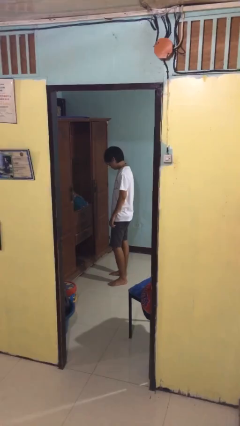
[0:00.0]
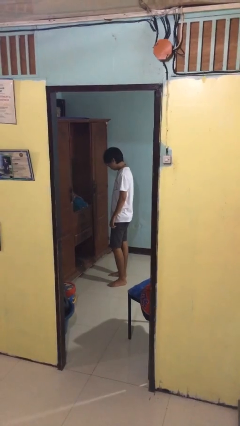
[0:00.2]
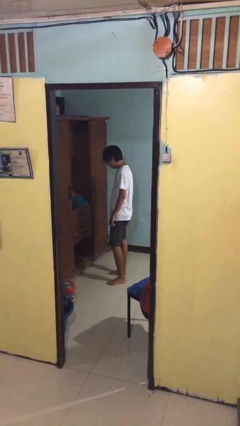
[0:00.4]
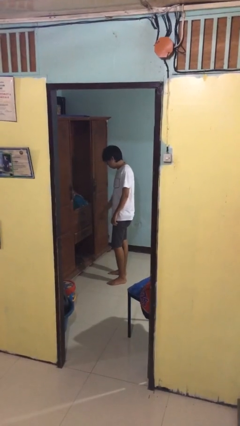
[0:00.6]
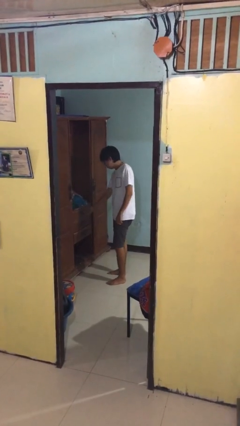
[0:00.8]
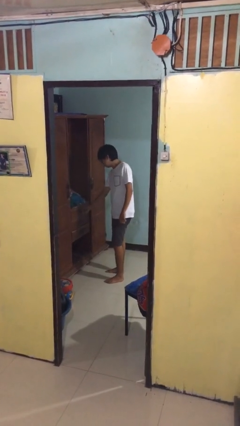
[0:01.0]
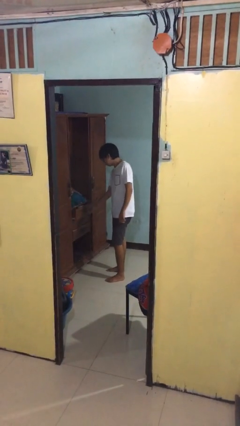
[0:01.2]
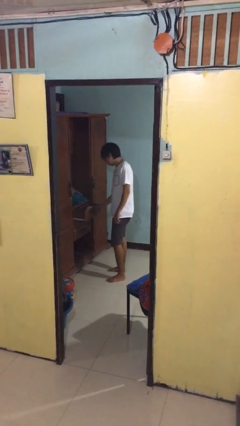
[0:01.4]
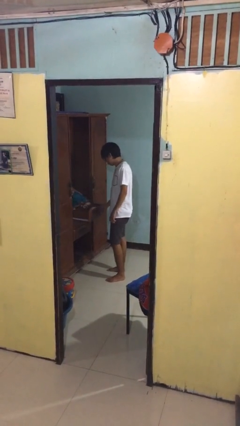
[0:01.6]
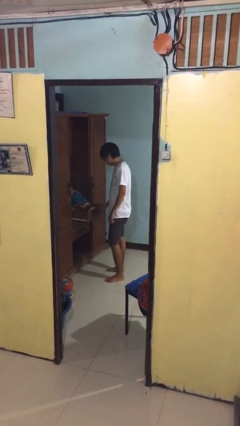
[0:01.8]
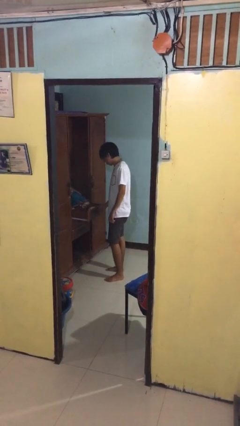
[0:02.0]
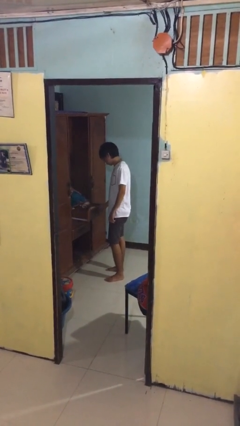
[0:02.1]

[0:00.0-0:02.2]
person opens dresser drawer

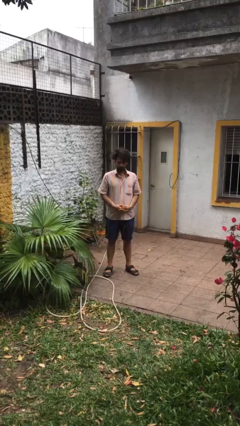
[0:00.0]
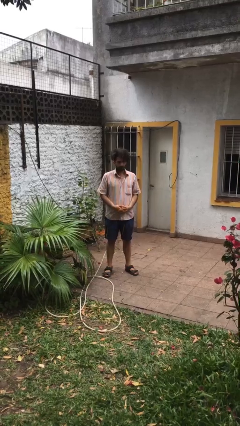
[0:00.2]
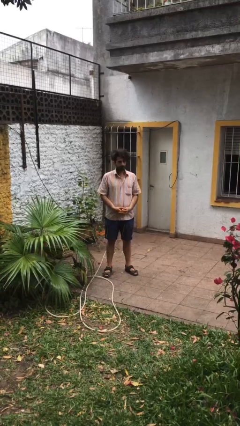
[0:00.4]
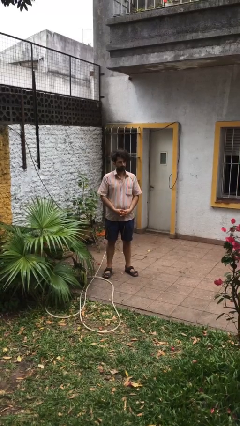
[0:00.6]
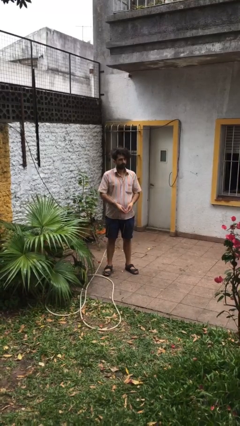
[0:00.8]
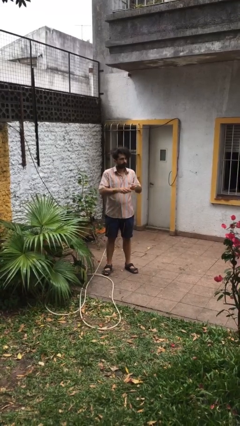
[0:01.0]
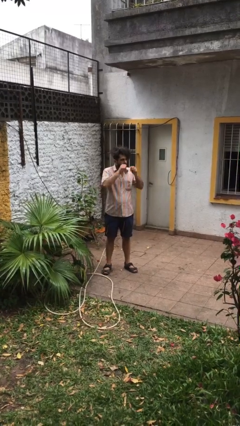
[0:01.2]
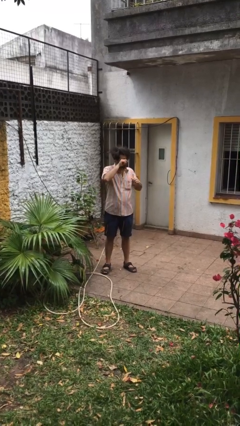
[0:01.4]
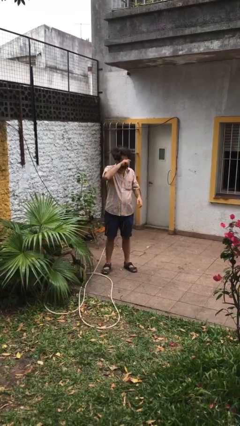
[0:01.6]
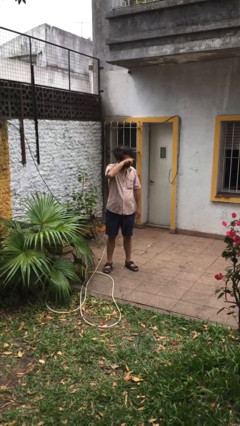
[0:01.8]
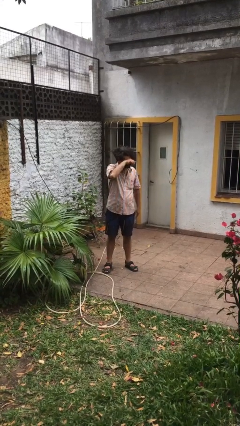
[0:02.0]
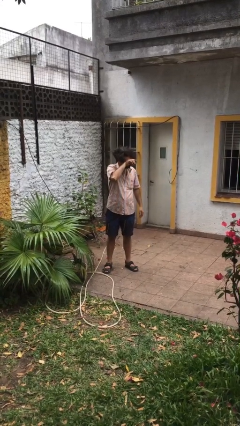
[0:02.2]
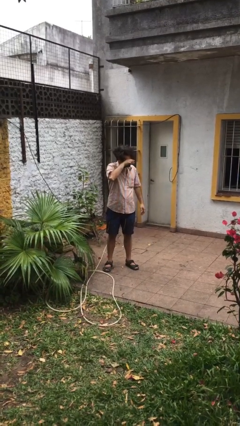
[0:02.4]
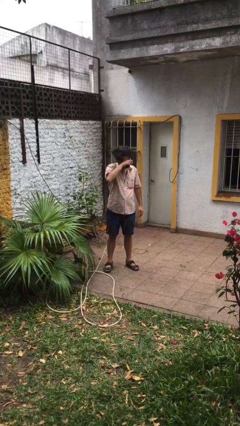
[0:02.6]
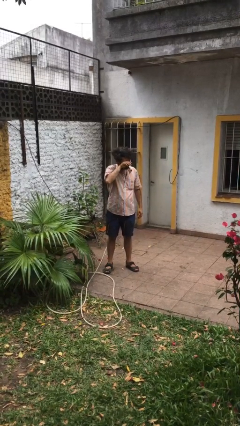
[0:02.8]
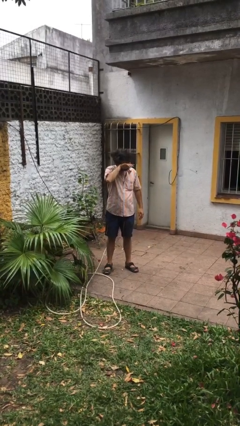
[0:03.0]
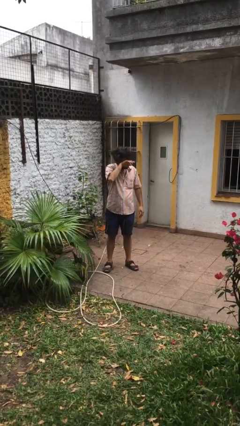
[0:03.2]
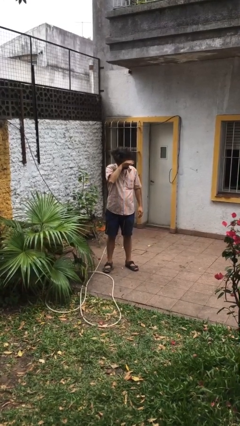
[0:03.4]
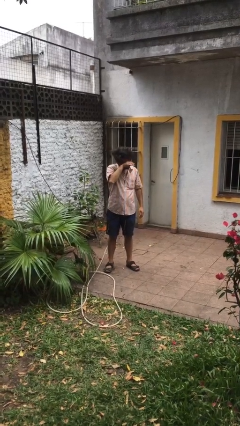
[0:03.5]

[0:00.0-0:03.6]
person rubs eyes

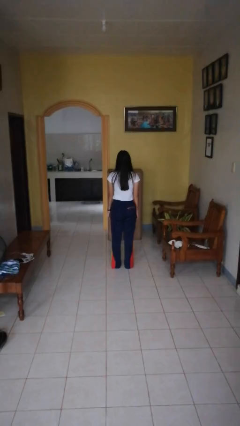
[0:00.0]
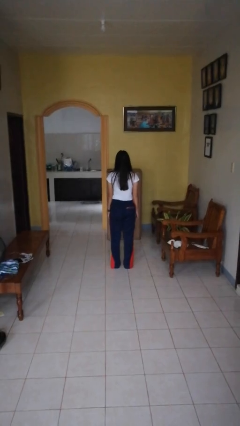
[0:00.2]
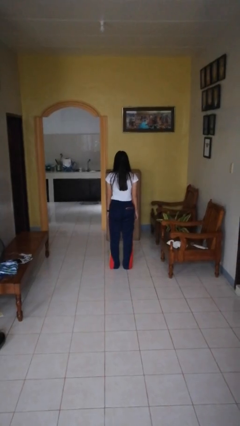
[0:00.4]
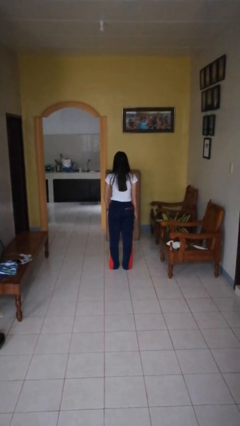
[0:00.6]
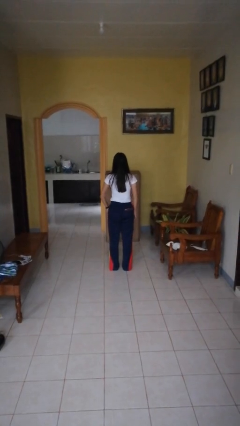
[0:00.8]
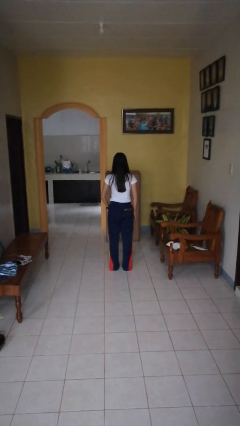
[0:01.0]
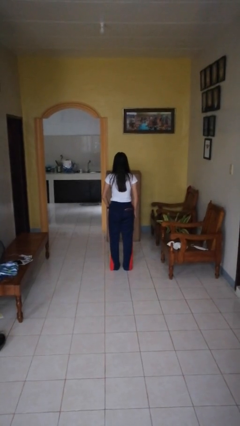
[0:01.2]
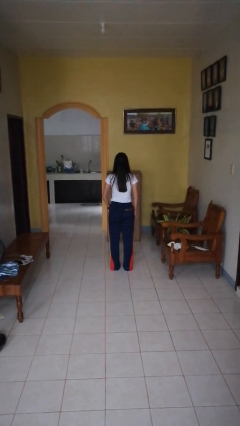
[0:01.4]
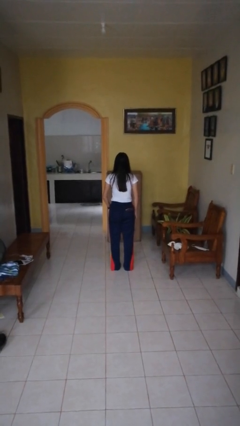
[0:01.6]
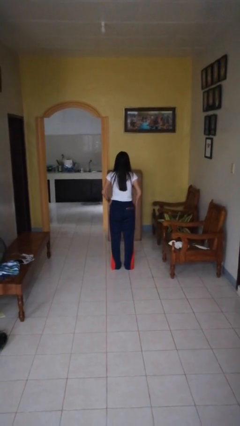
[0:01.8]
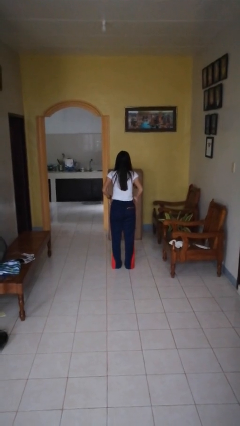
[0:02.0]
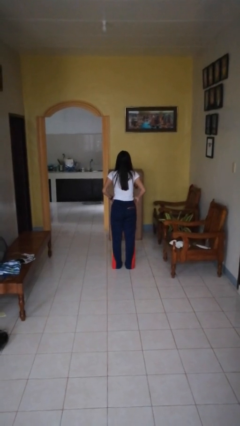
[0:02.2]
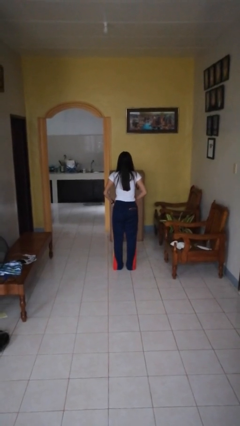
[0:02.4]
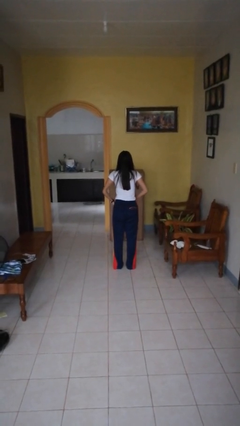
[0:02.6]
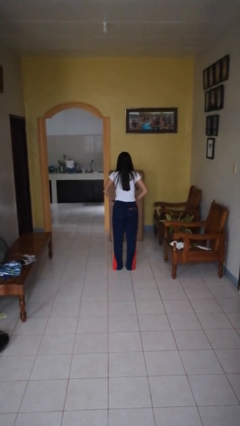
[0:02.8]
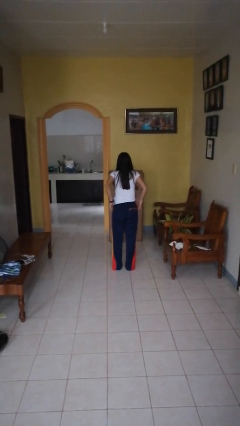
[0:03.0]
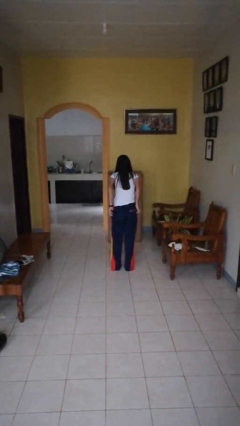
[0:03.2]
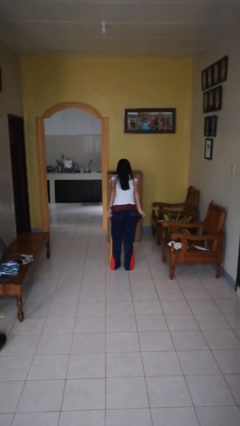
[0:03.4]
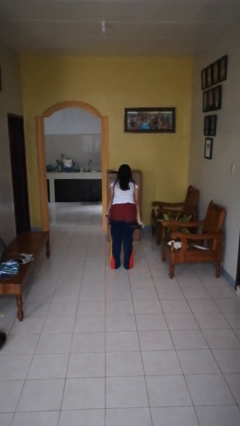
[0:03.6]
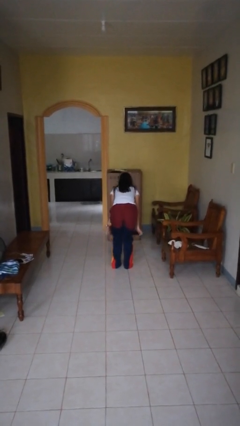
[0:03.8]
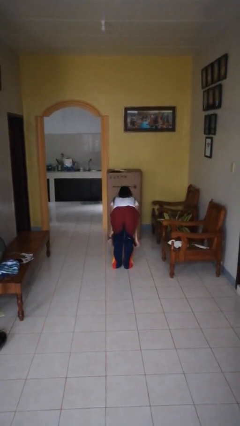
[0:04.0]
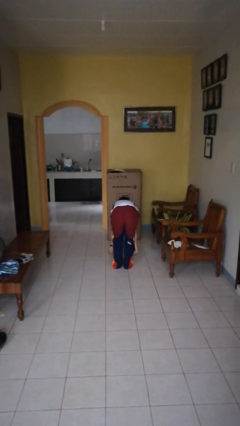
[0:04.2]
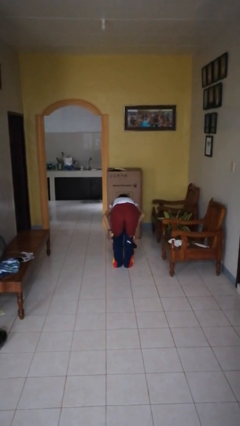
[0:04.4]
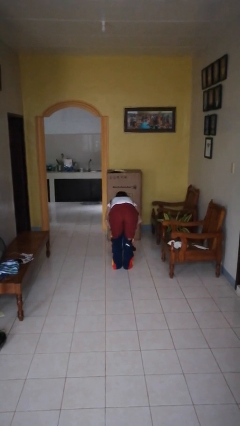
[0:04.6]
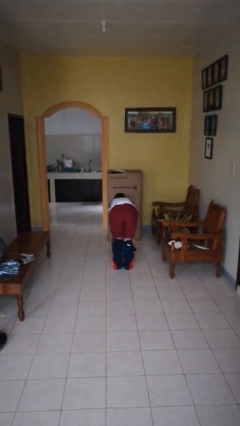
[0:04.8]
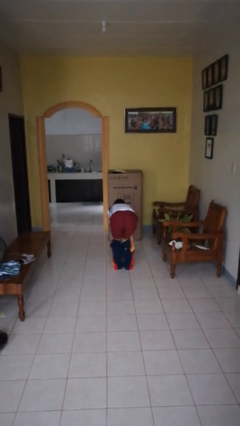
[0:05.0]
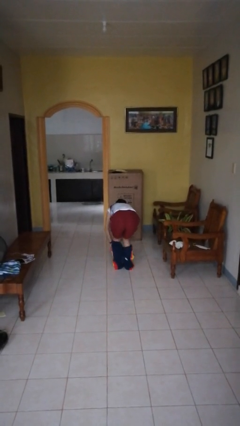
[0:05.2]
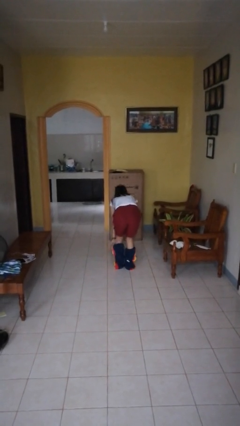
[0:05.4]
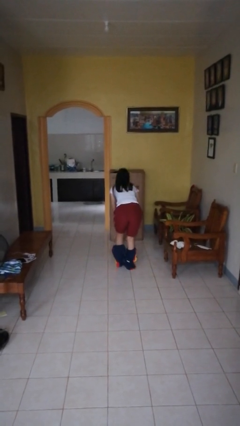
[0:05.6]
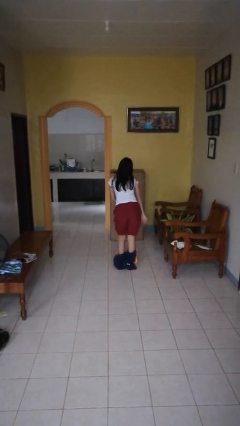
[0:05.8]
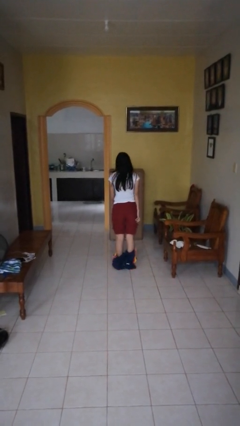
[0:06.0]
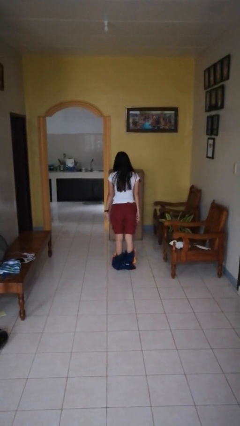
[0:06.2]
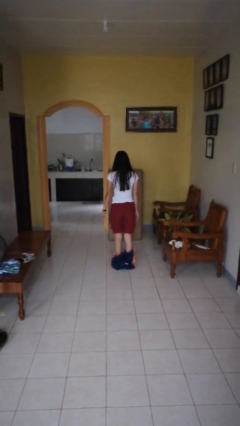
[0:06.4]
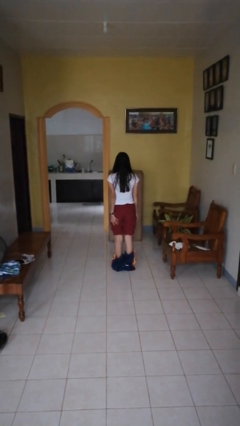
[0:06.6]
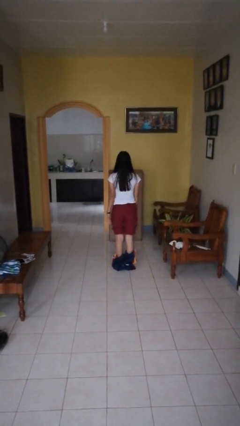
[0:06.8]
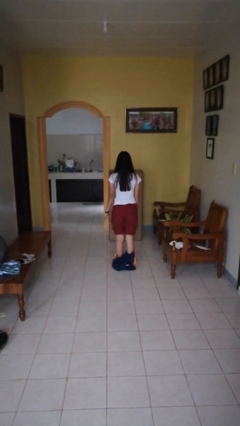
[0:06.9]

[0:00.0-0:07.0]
person takes off pants

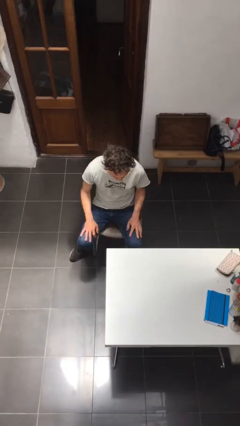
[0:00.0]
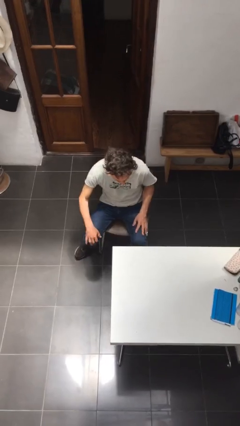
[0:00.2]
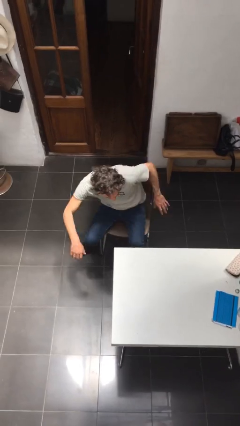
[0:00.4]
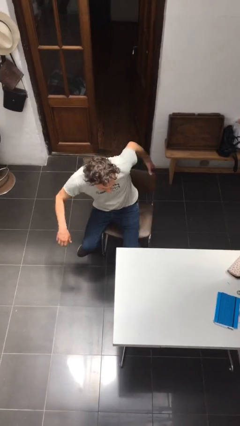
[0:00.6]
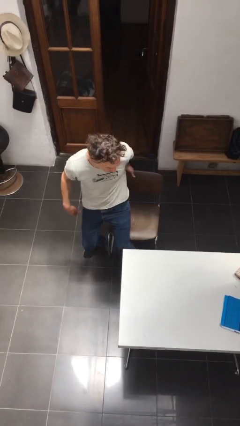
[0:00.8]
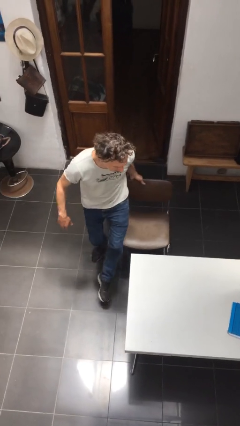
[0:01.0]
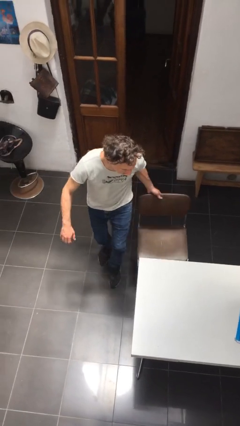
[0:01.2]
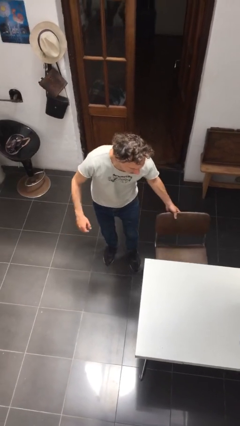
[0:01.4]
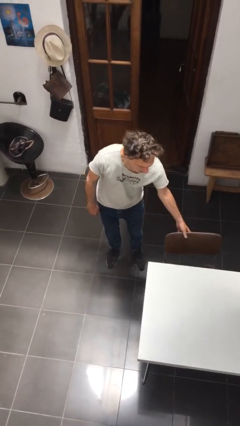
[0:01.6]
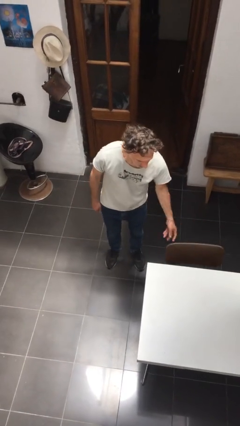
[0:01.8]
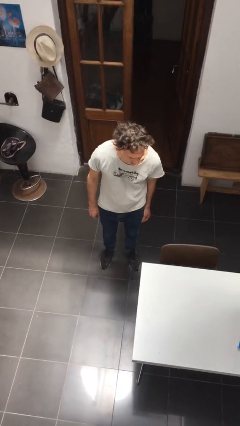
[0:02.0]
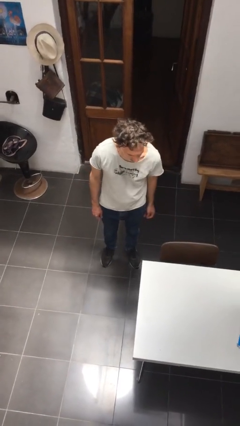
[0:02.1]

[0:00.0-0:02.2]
person stands up

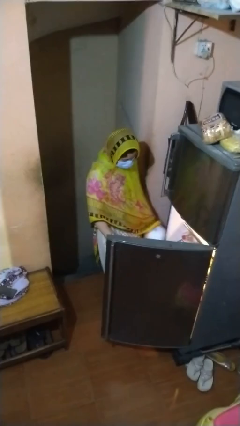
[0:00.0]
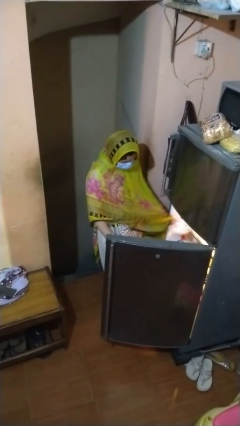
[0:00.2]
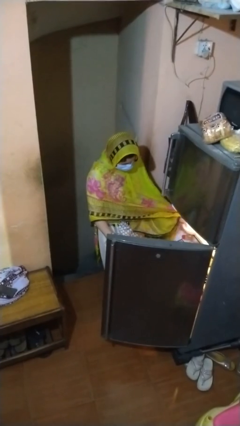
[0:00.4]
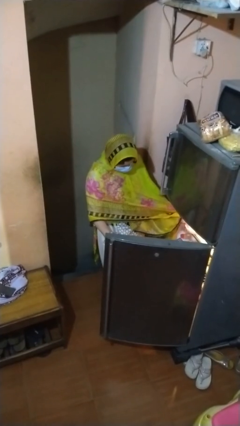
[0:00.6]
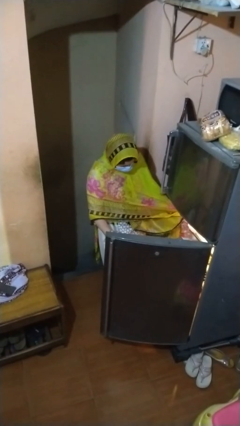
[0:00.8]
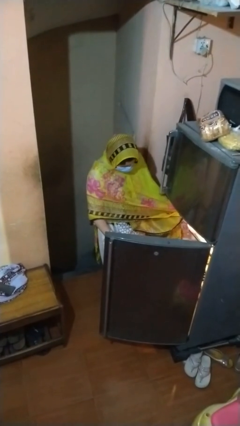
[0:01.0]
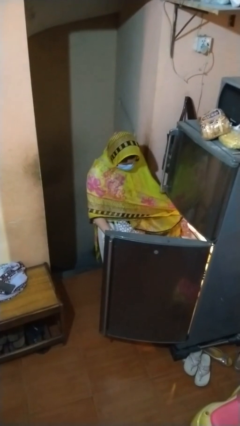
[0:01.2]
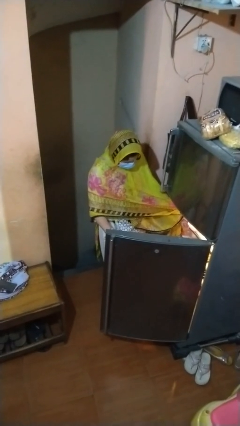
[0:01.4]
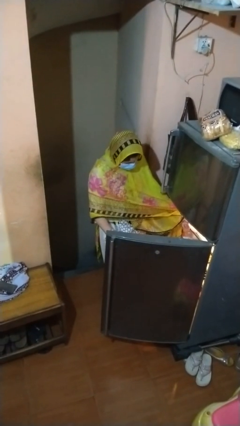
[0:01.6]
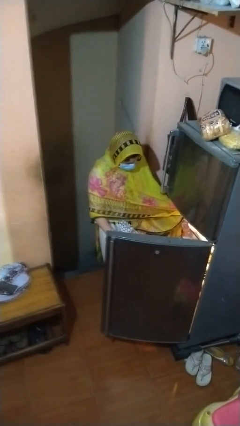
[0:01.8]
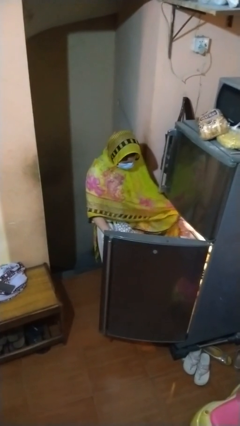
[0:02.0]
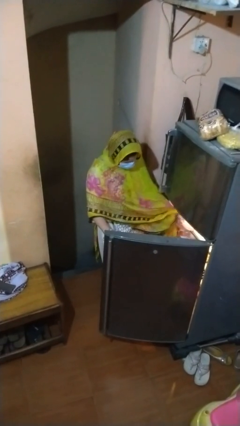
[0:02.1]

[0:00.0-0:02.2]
person puts object into refrigerator

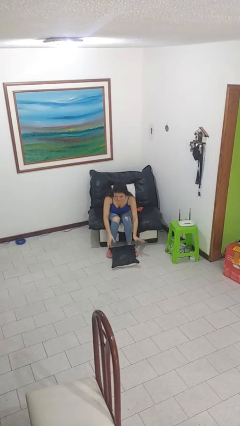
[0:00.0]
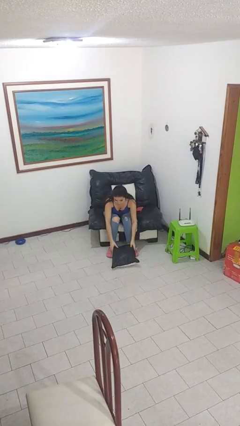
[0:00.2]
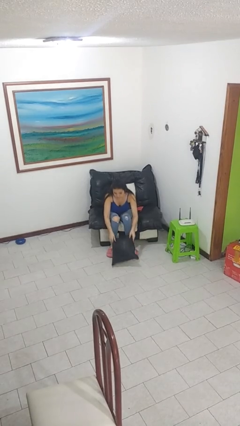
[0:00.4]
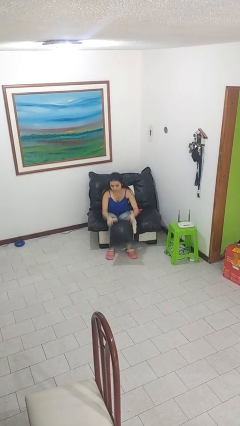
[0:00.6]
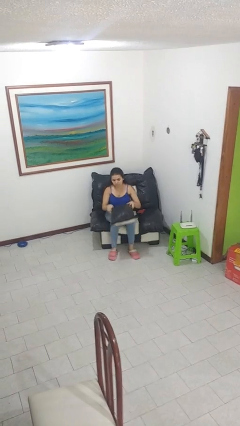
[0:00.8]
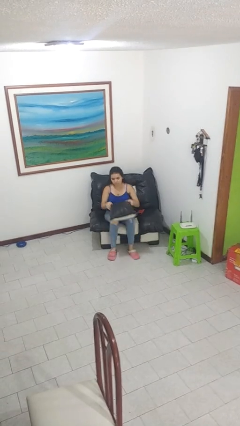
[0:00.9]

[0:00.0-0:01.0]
person picks up object from floor
